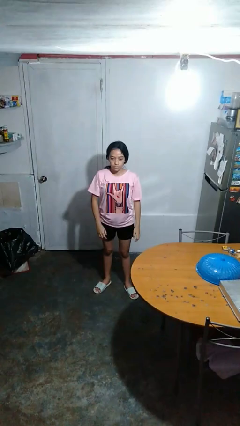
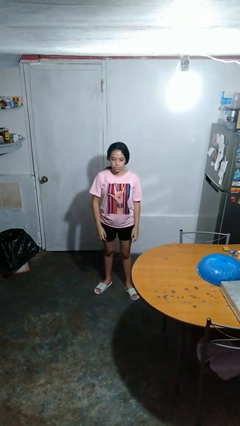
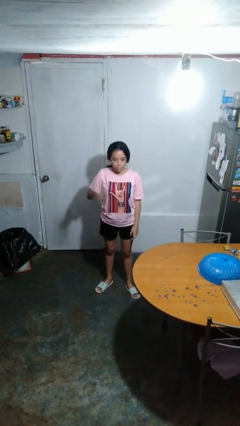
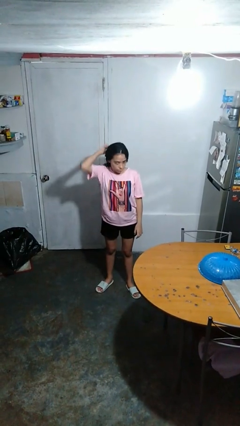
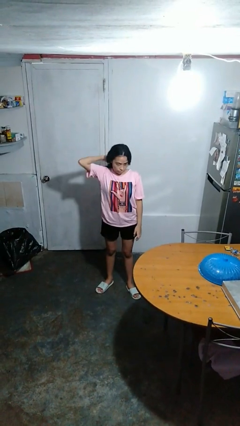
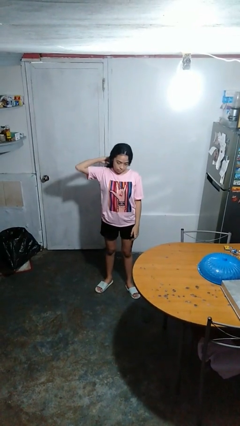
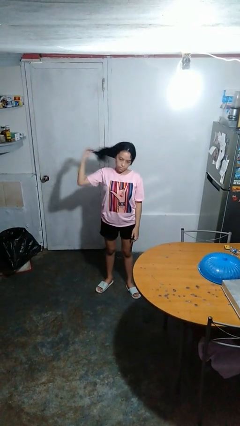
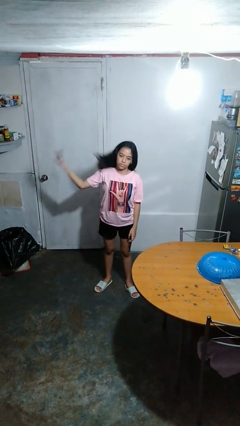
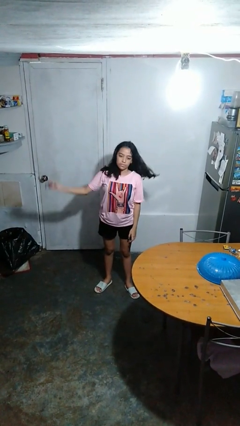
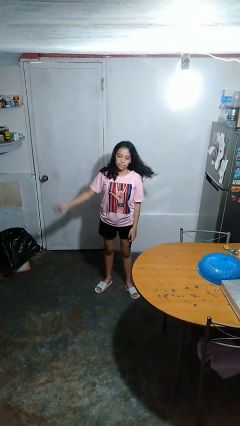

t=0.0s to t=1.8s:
person takes off hairtie

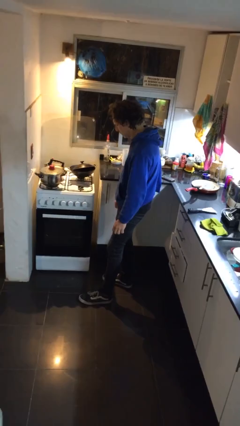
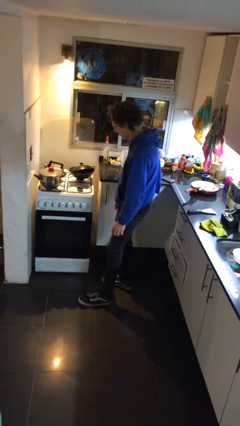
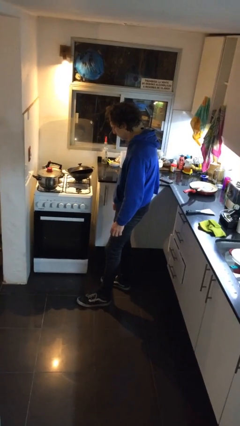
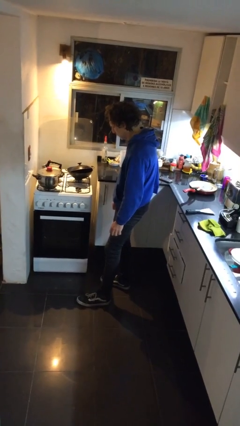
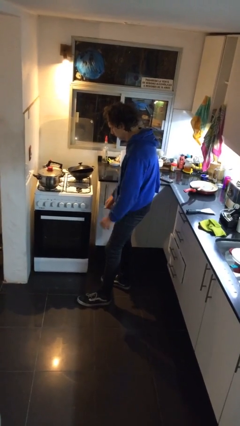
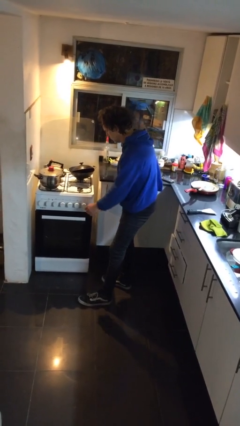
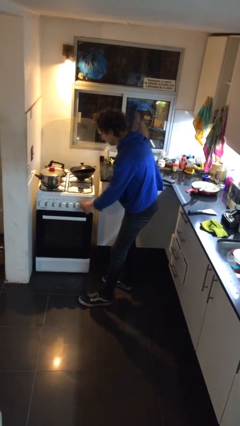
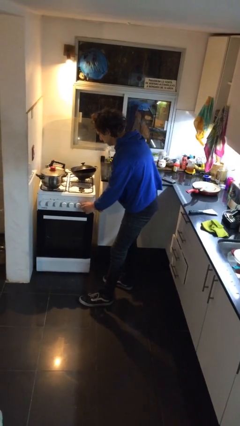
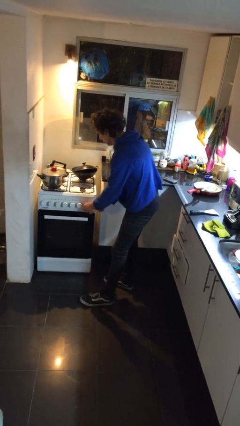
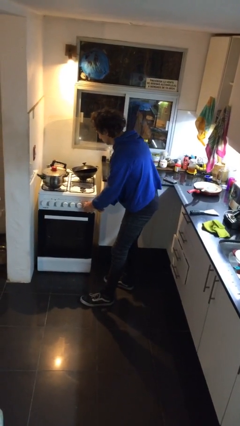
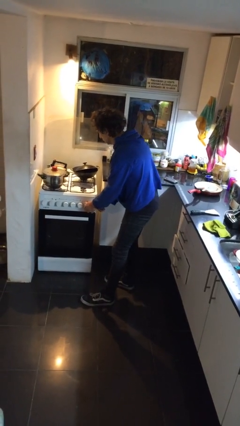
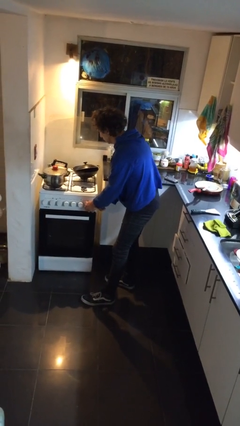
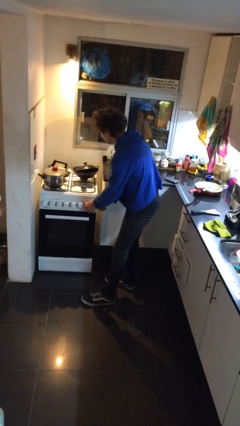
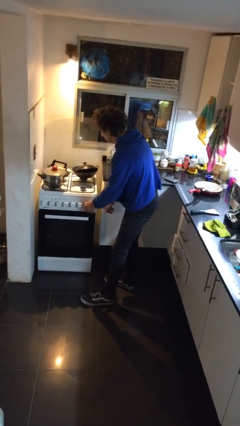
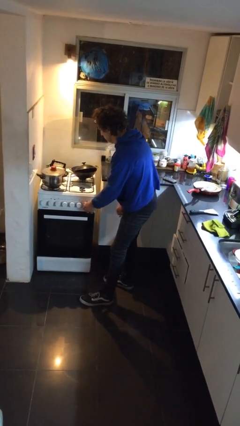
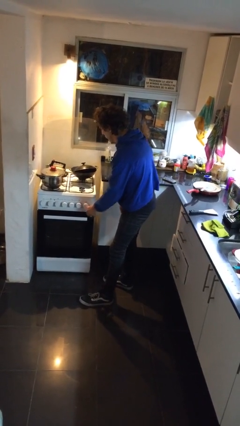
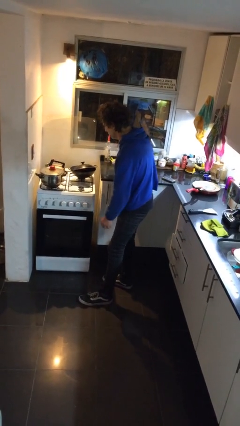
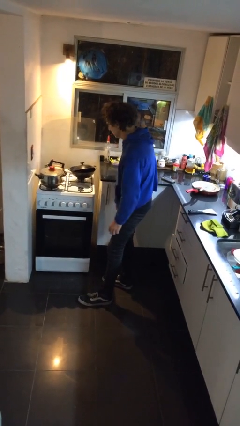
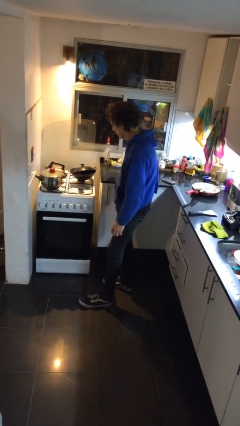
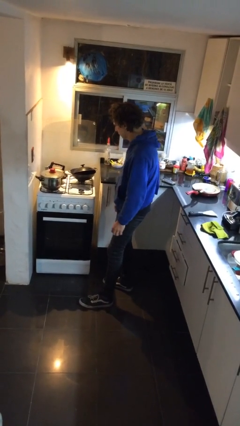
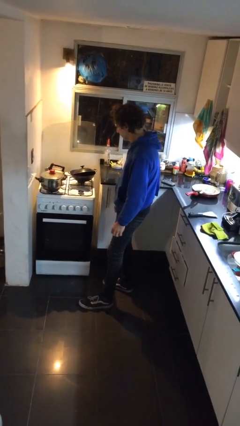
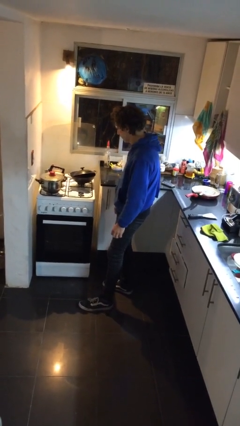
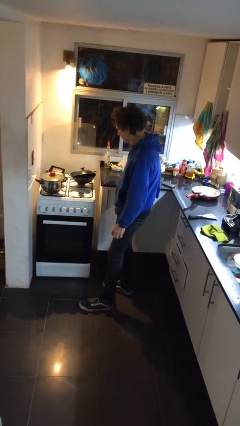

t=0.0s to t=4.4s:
person turns on stovetop

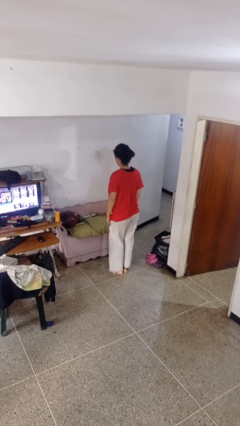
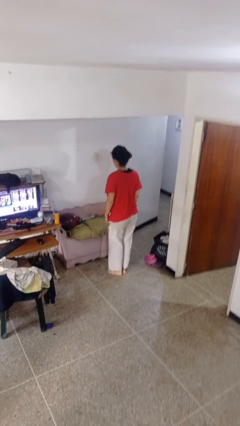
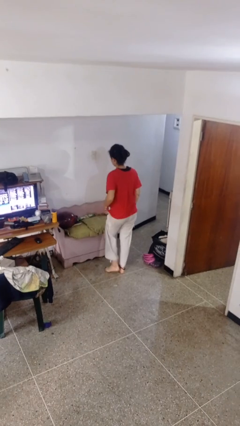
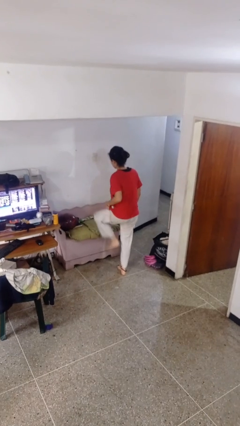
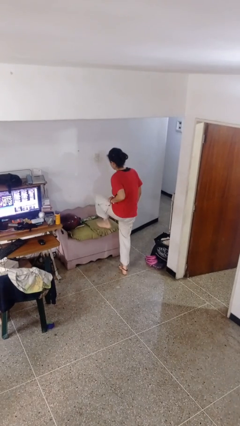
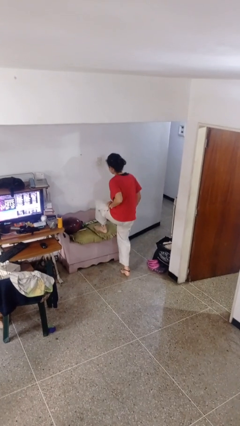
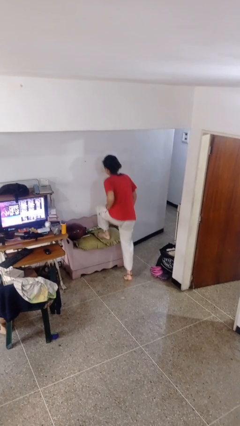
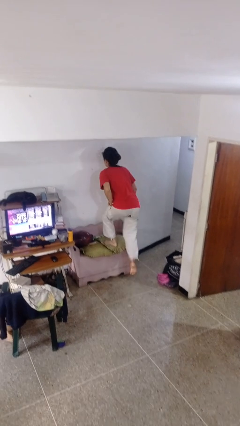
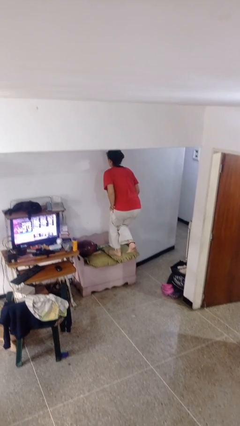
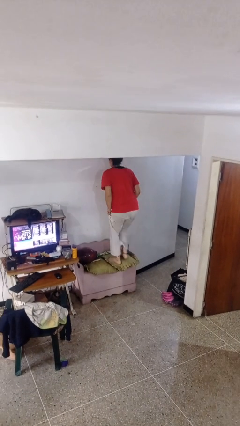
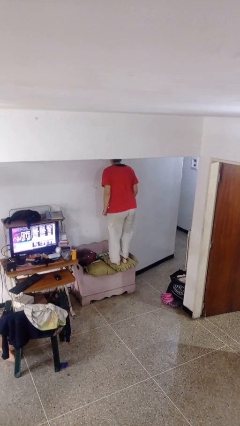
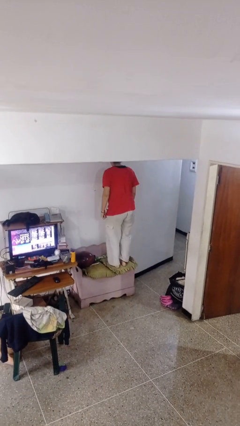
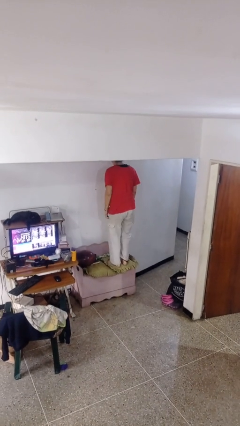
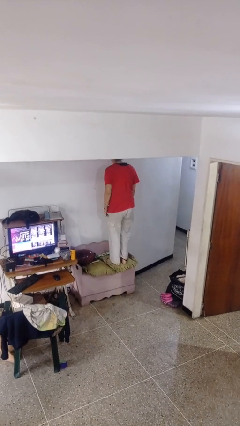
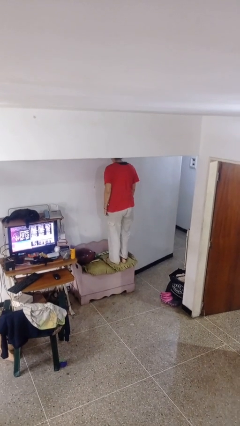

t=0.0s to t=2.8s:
person climbs on couch

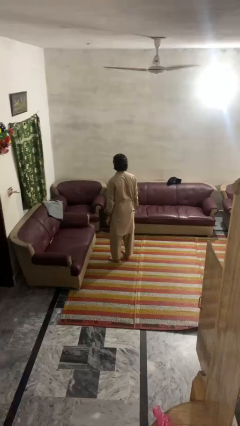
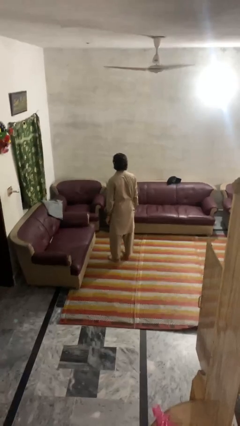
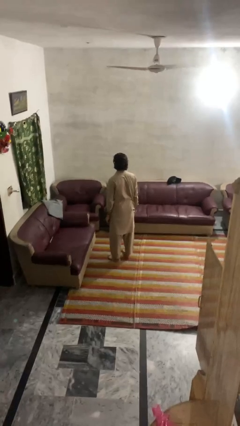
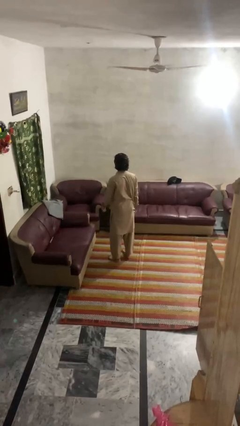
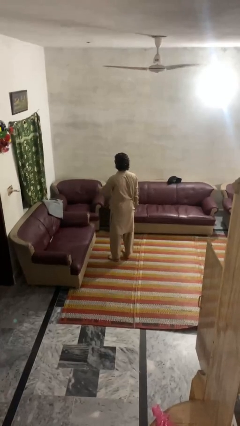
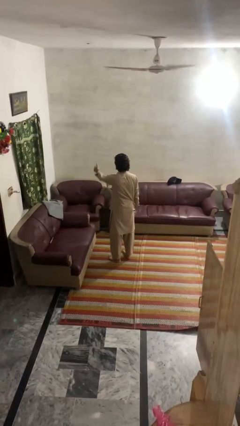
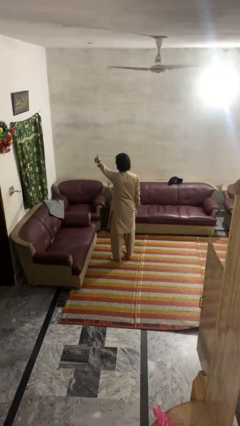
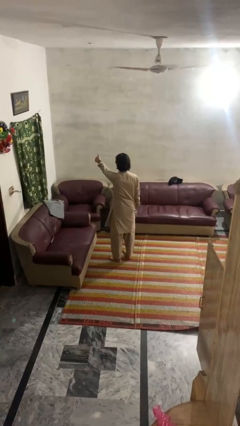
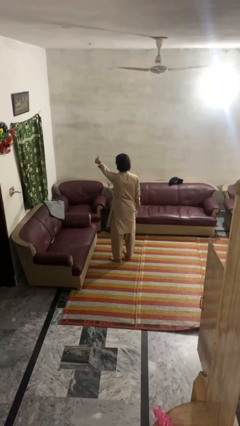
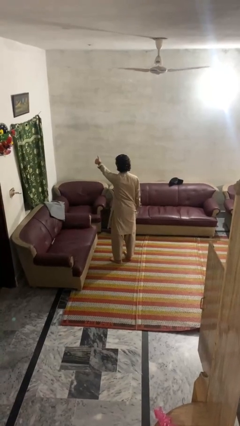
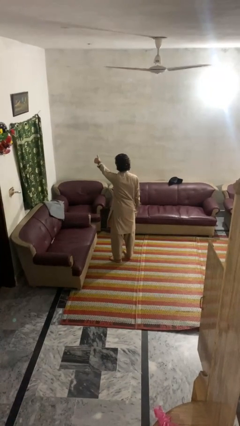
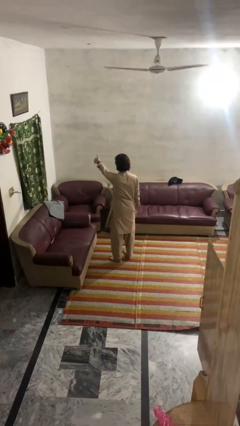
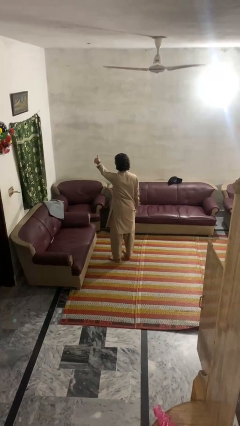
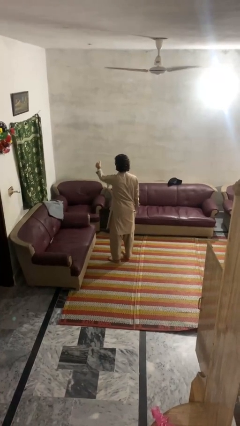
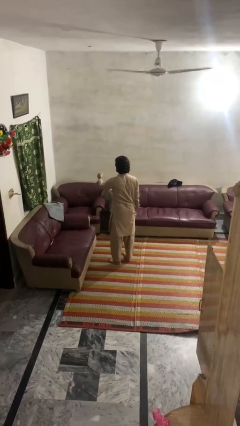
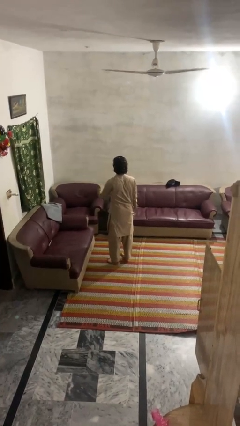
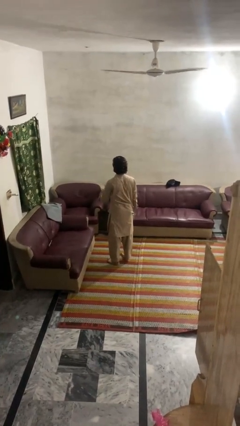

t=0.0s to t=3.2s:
person gestures thumbs up

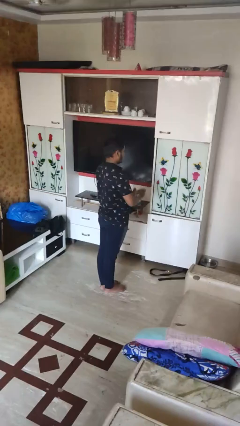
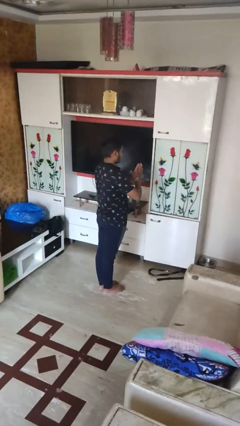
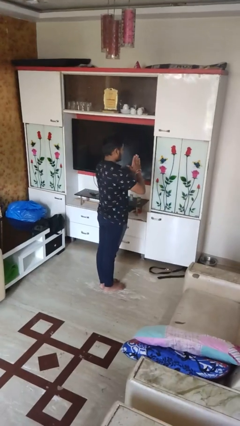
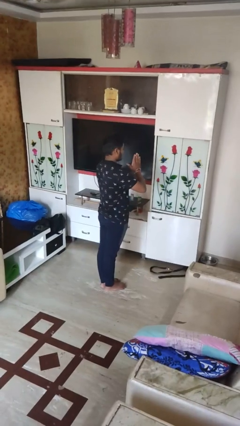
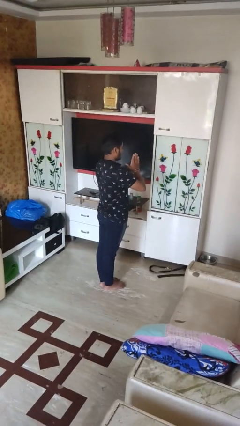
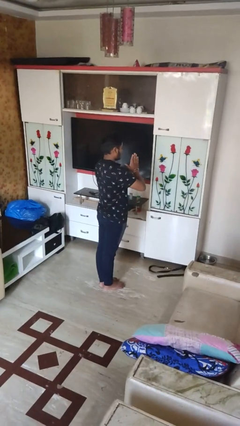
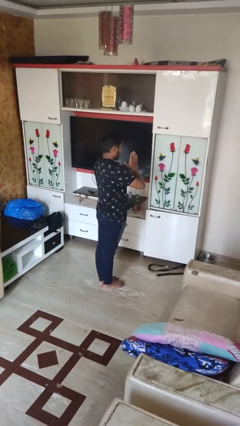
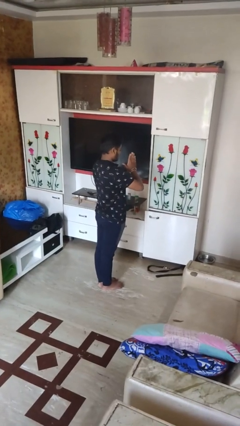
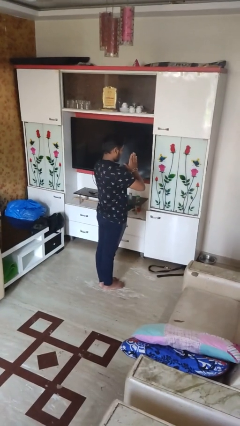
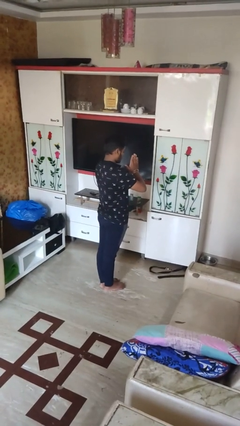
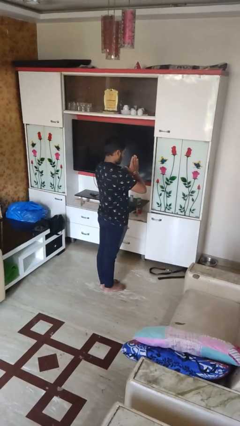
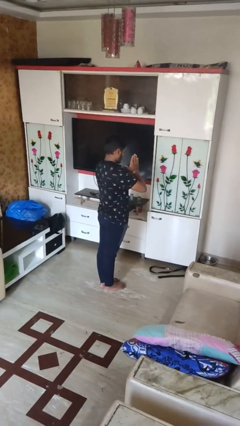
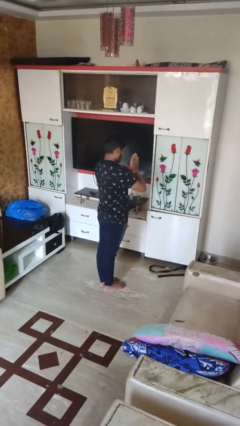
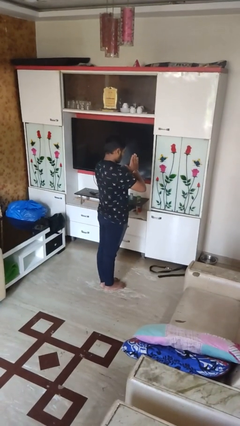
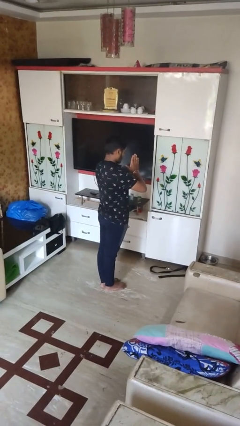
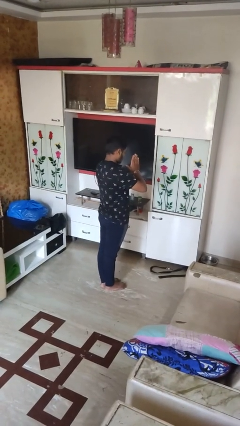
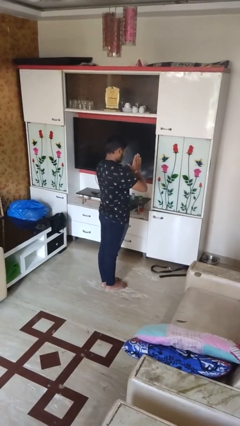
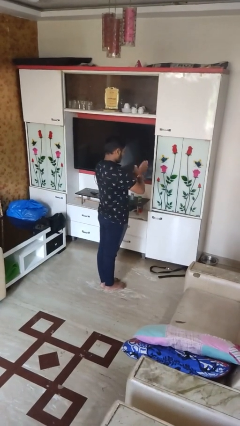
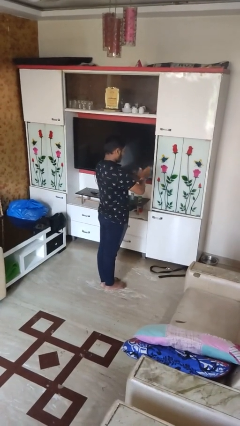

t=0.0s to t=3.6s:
person prays

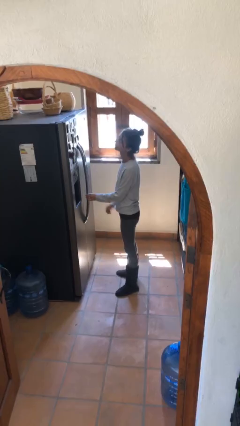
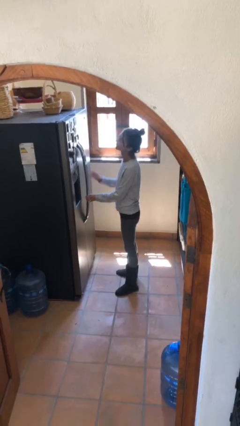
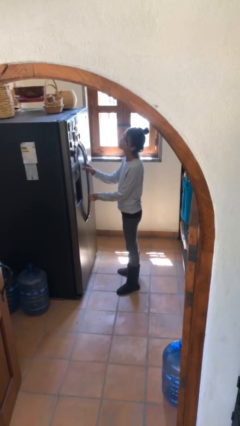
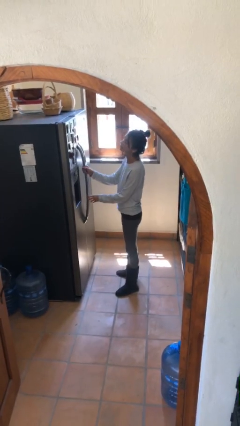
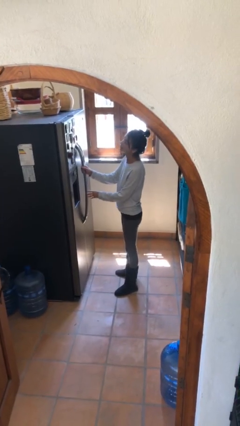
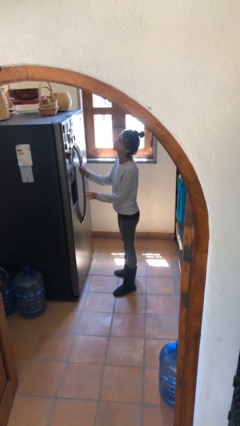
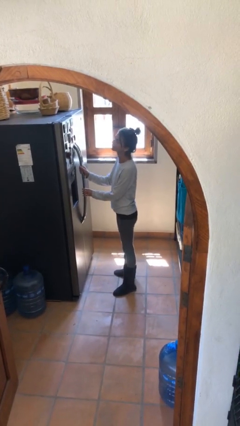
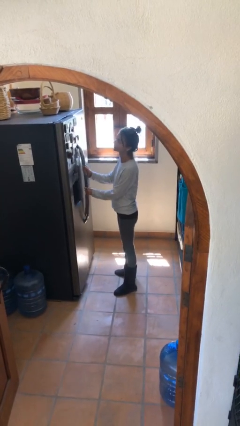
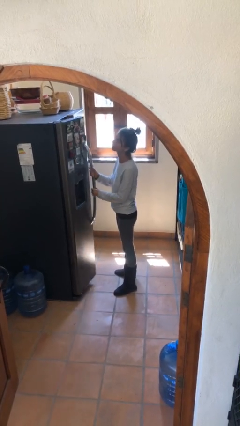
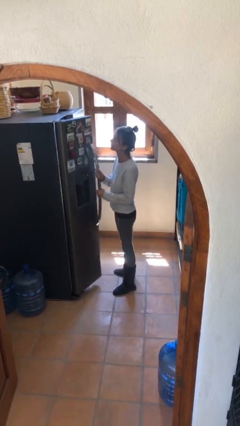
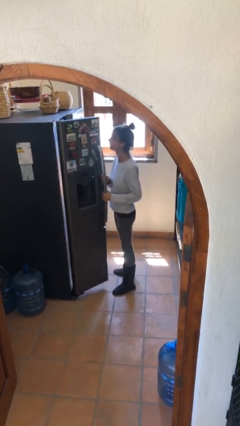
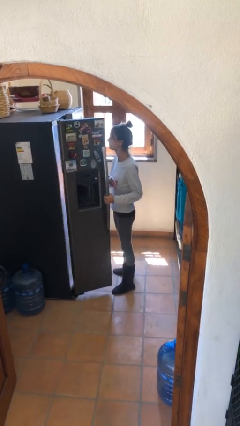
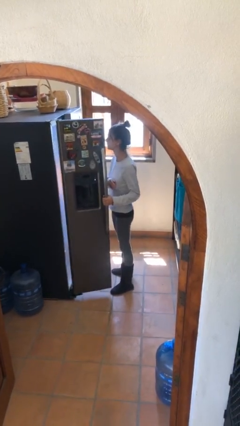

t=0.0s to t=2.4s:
person opens refrigerator
